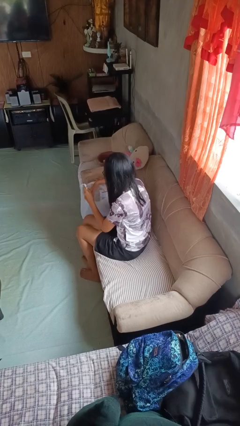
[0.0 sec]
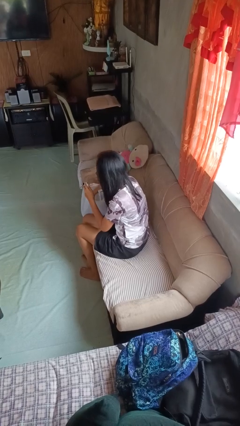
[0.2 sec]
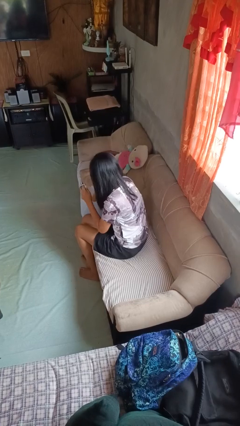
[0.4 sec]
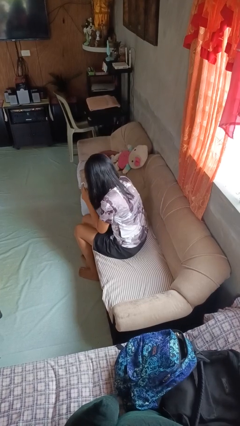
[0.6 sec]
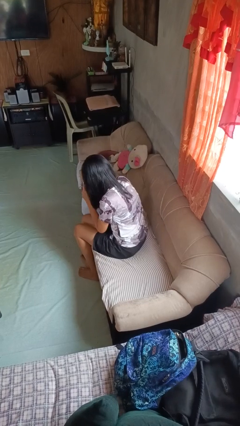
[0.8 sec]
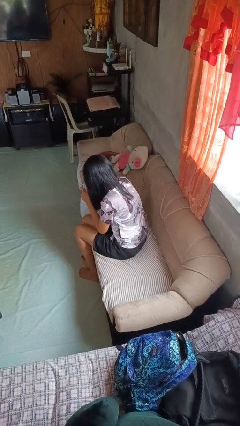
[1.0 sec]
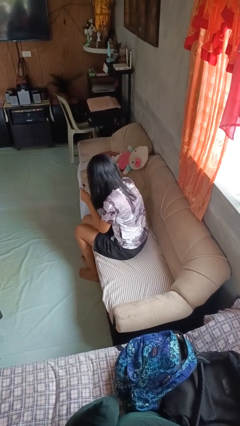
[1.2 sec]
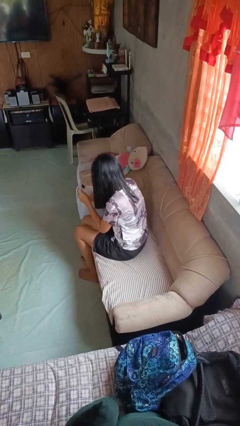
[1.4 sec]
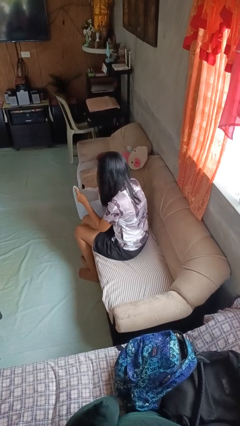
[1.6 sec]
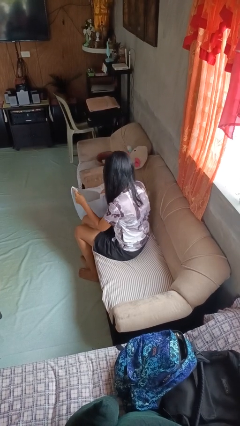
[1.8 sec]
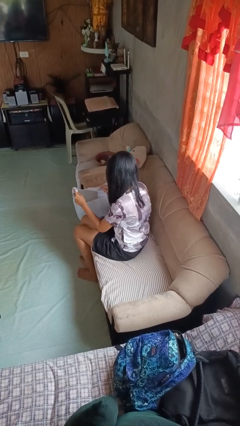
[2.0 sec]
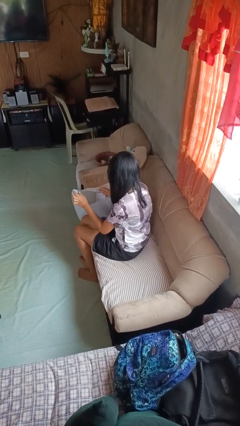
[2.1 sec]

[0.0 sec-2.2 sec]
person searches in bag

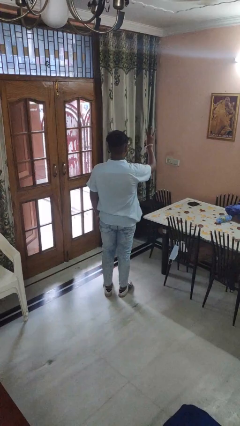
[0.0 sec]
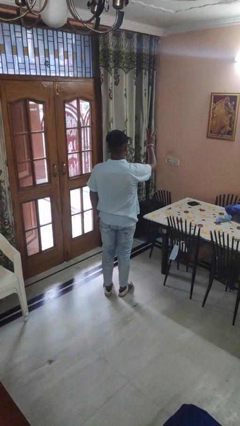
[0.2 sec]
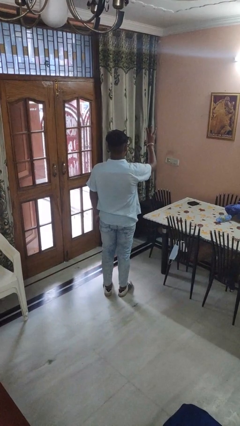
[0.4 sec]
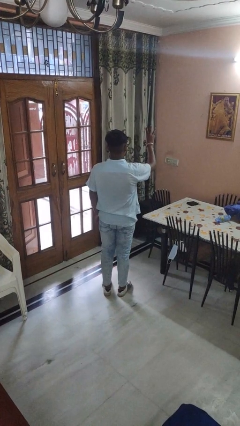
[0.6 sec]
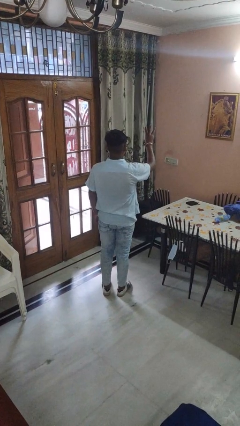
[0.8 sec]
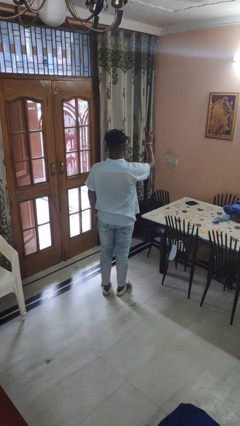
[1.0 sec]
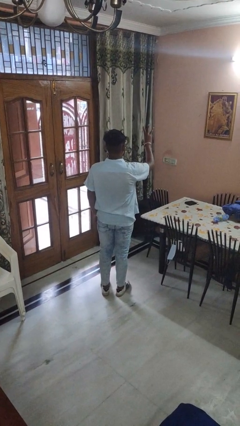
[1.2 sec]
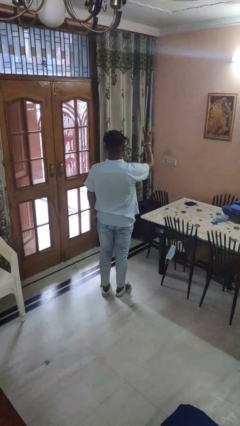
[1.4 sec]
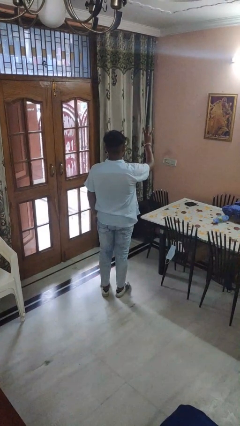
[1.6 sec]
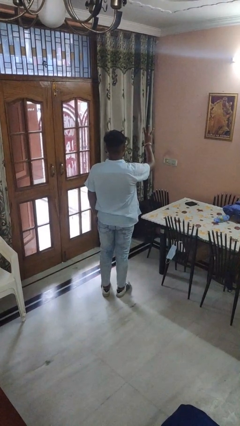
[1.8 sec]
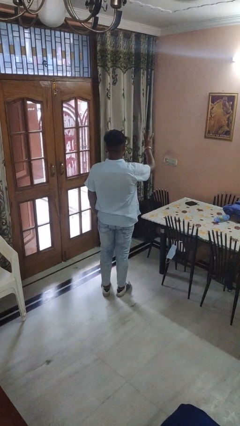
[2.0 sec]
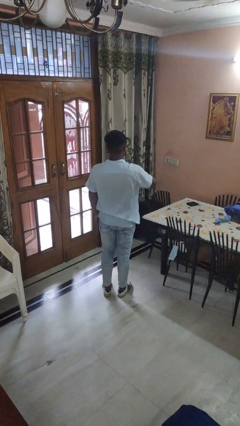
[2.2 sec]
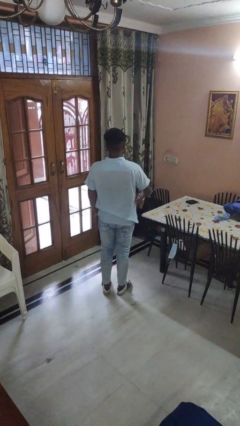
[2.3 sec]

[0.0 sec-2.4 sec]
person gestures number three

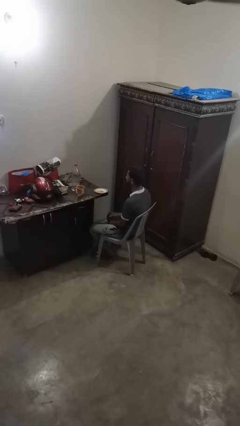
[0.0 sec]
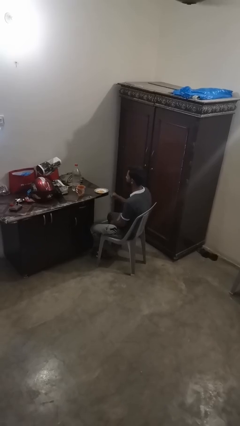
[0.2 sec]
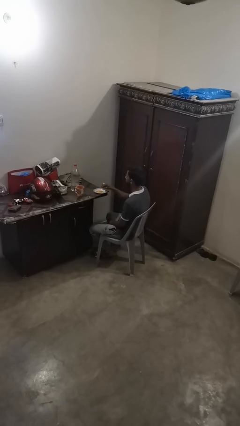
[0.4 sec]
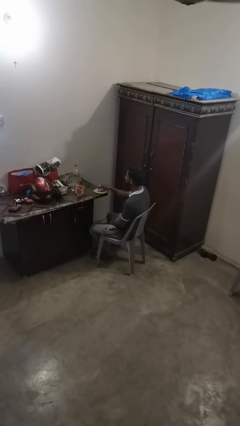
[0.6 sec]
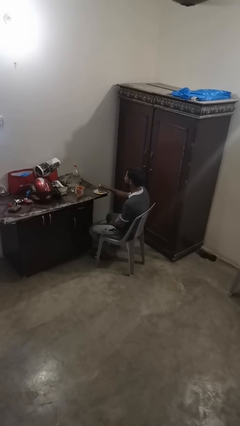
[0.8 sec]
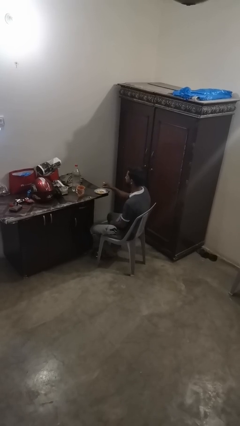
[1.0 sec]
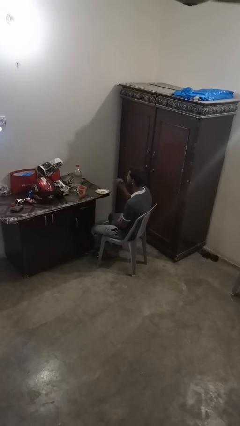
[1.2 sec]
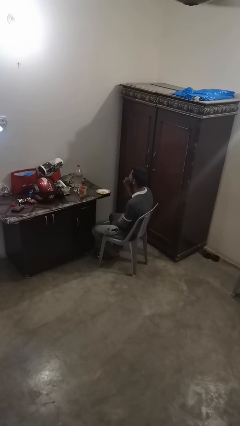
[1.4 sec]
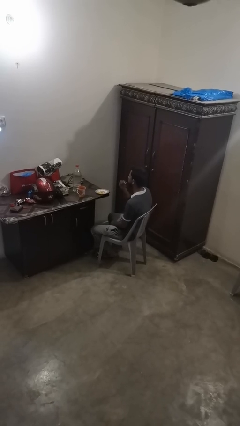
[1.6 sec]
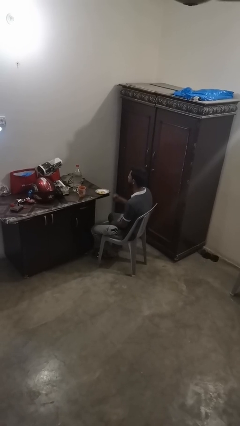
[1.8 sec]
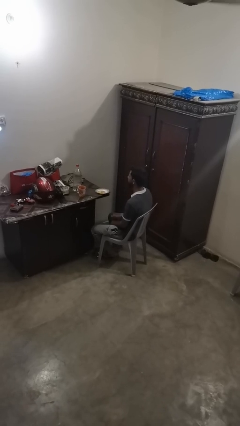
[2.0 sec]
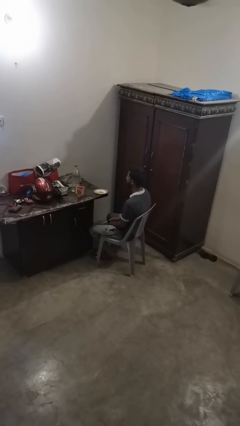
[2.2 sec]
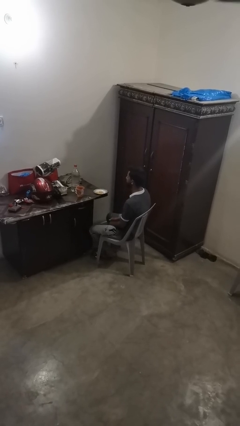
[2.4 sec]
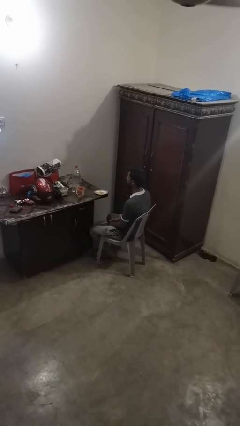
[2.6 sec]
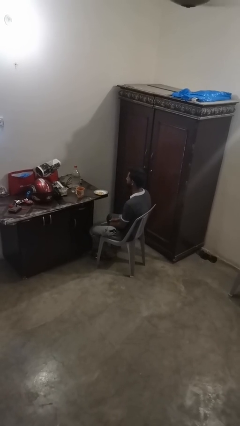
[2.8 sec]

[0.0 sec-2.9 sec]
person eats with hands

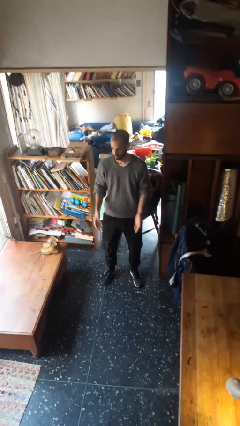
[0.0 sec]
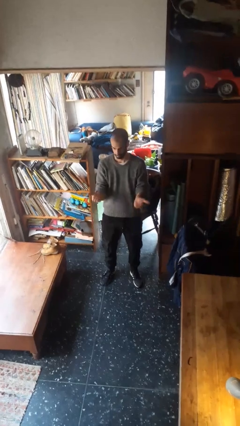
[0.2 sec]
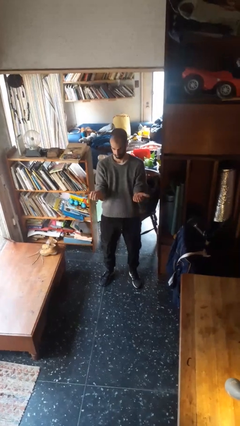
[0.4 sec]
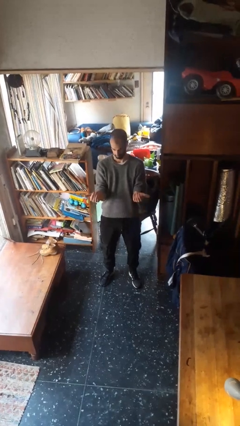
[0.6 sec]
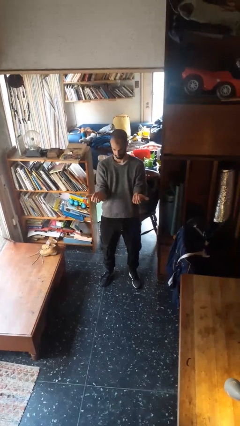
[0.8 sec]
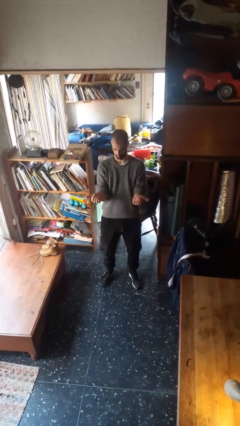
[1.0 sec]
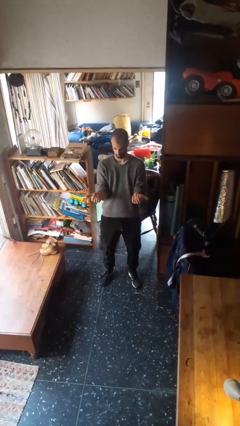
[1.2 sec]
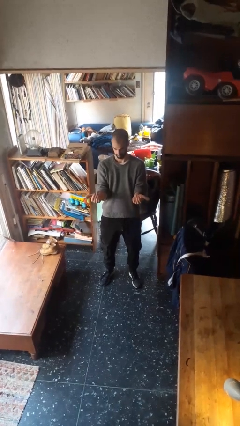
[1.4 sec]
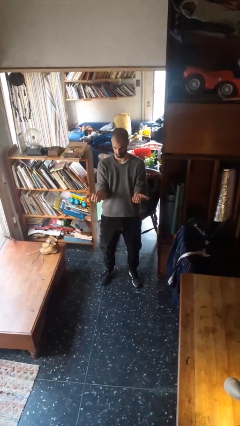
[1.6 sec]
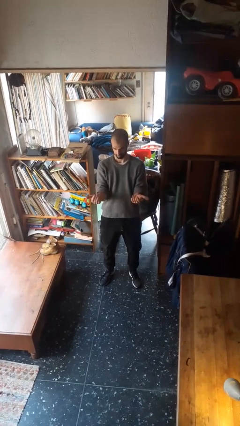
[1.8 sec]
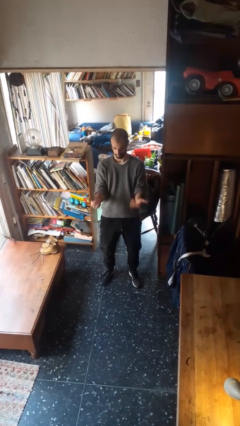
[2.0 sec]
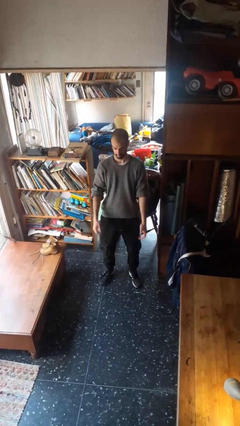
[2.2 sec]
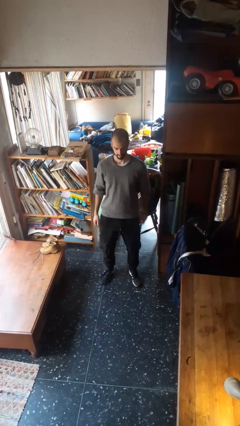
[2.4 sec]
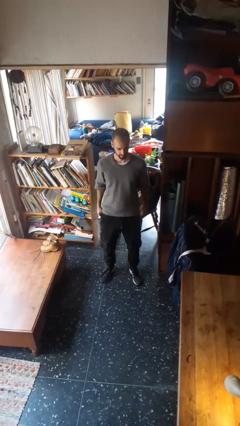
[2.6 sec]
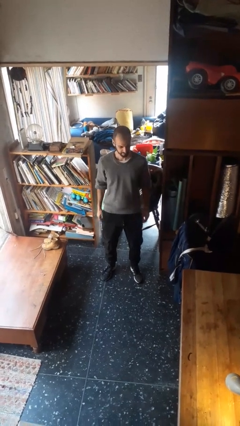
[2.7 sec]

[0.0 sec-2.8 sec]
person gestures come here

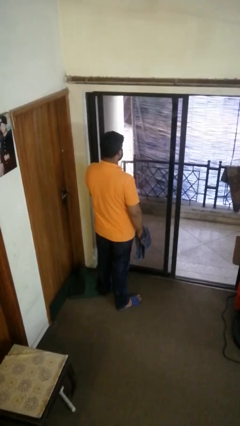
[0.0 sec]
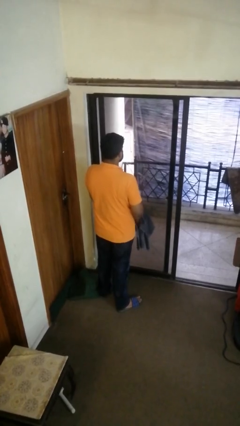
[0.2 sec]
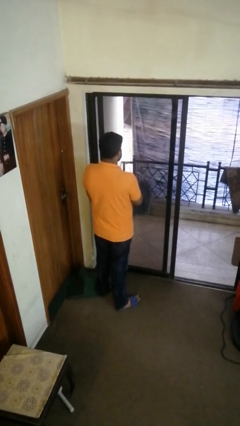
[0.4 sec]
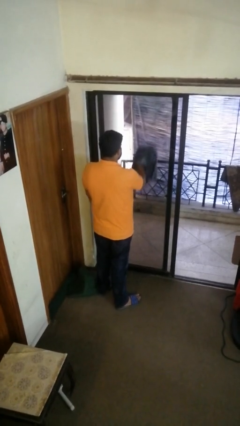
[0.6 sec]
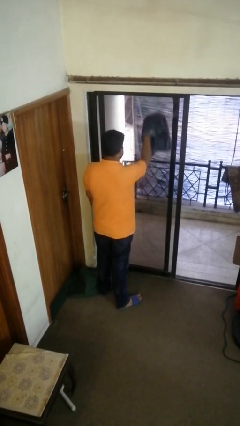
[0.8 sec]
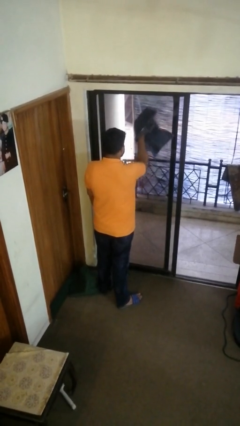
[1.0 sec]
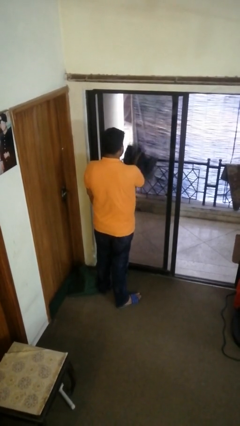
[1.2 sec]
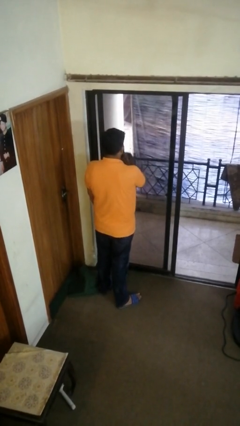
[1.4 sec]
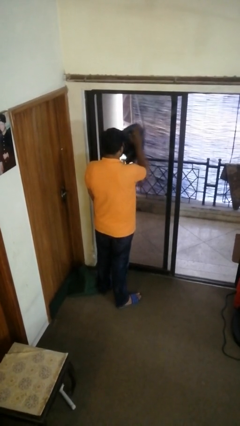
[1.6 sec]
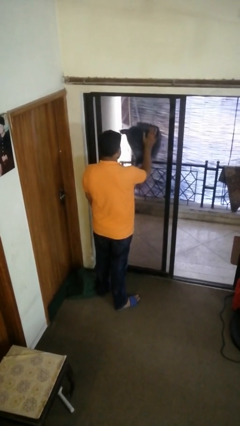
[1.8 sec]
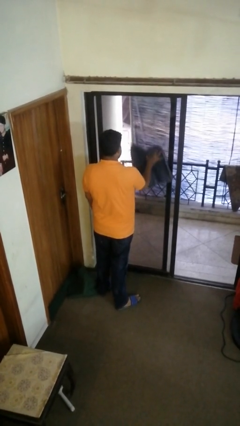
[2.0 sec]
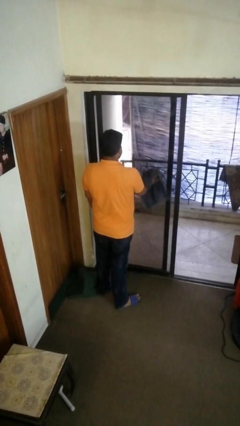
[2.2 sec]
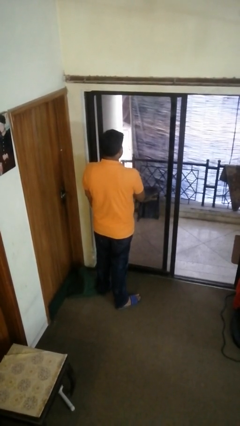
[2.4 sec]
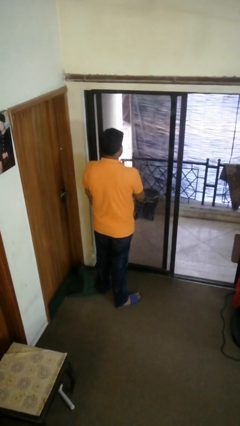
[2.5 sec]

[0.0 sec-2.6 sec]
person washes window

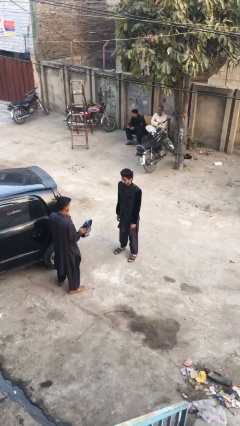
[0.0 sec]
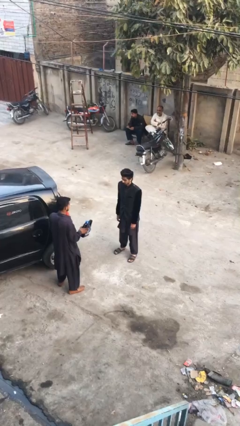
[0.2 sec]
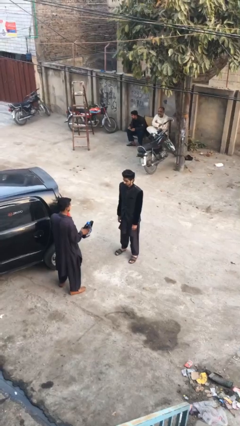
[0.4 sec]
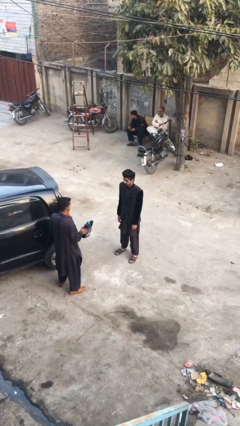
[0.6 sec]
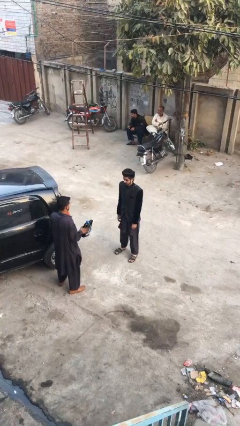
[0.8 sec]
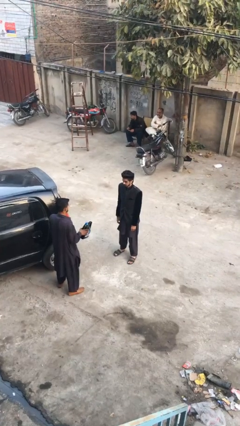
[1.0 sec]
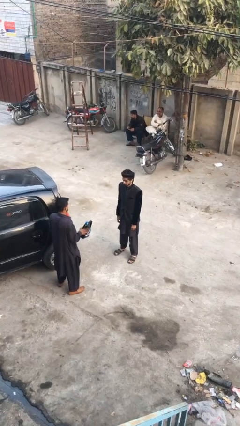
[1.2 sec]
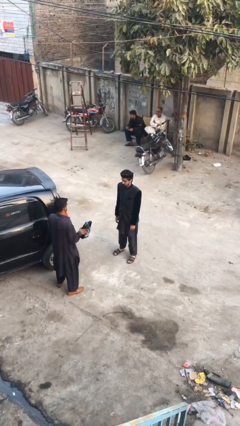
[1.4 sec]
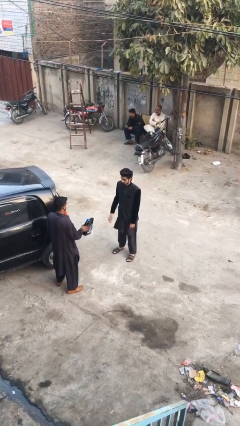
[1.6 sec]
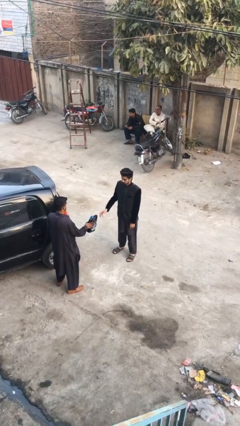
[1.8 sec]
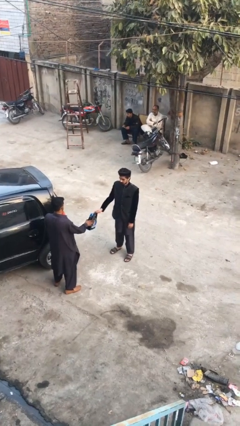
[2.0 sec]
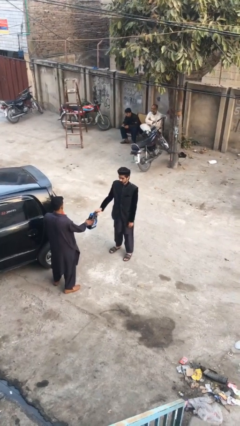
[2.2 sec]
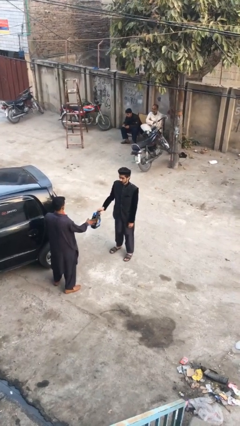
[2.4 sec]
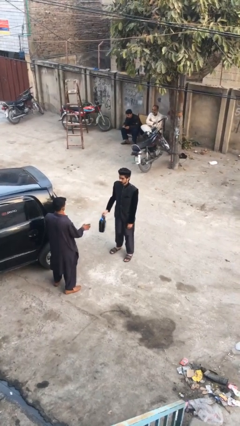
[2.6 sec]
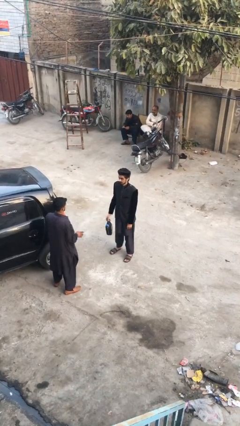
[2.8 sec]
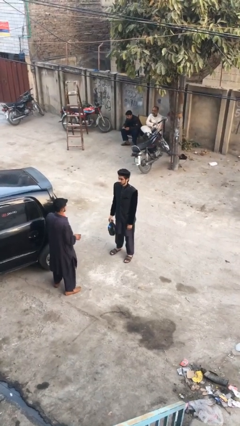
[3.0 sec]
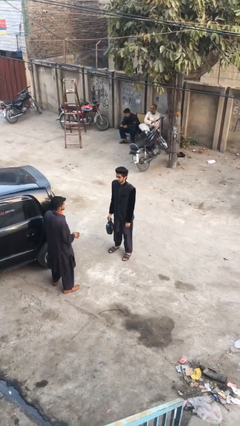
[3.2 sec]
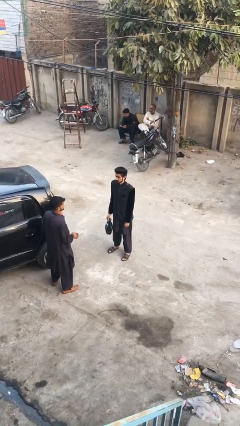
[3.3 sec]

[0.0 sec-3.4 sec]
person transfers object to person

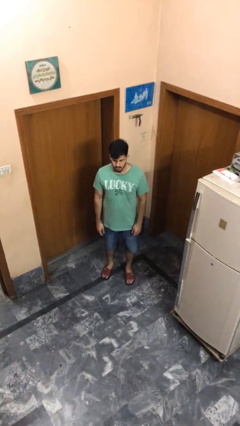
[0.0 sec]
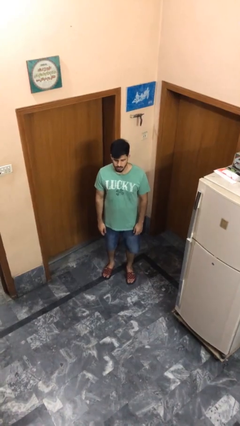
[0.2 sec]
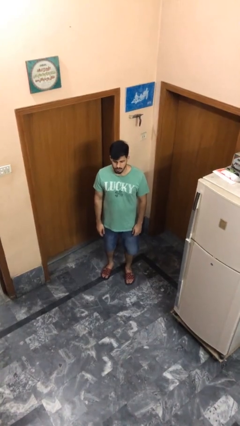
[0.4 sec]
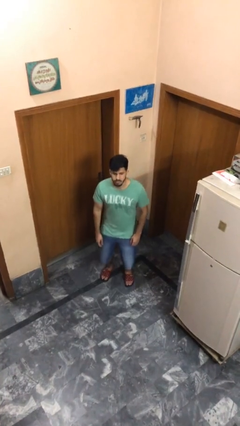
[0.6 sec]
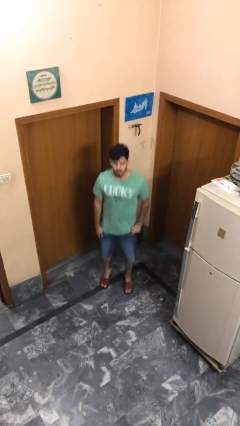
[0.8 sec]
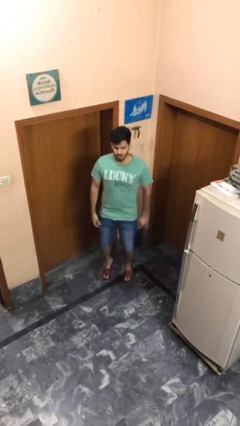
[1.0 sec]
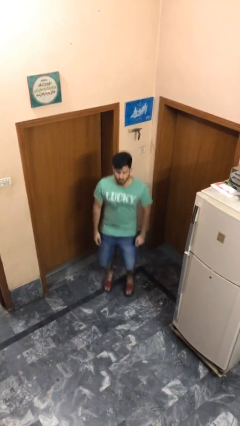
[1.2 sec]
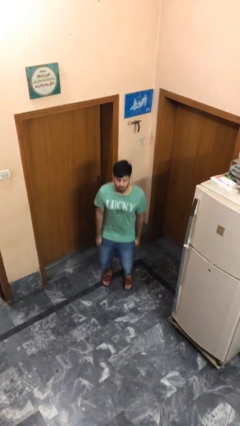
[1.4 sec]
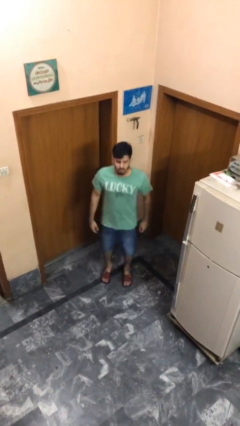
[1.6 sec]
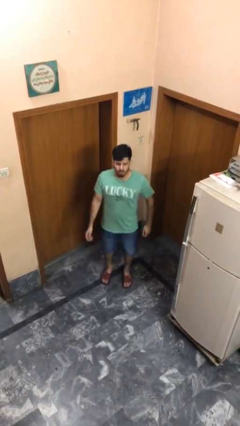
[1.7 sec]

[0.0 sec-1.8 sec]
person jumps
